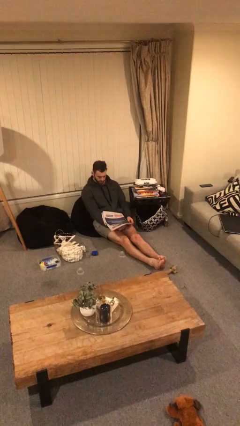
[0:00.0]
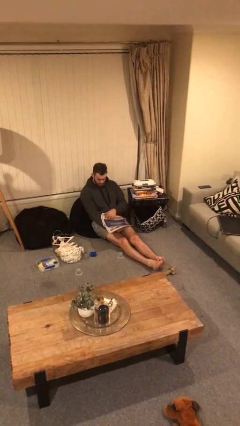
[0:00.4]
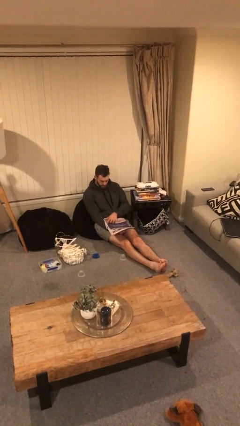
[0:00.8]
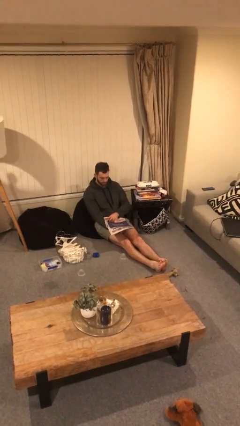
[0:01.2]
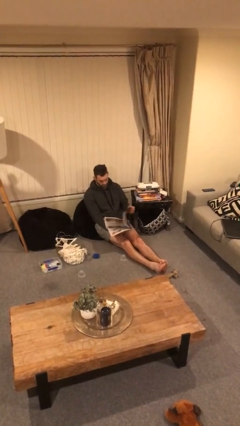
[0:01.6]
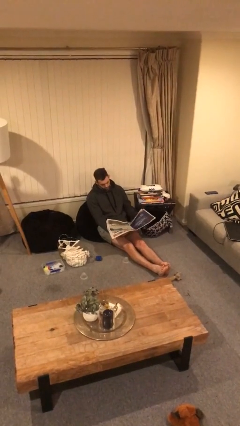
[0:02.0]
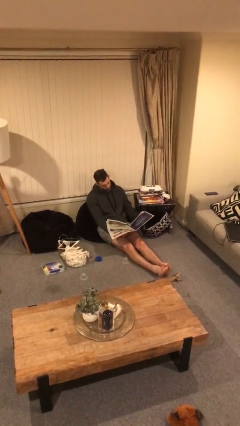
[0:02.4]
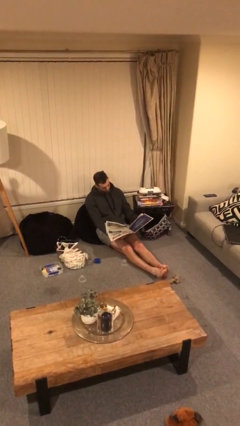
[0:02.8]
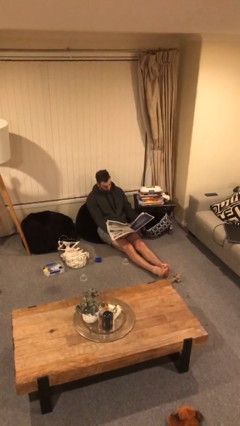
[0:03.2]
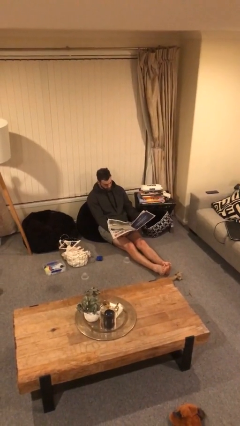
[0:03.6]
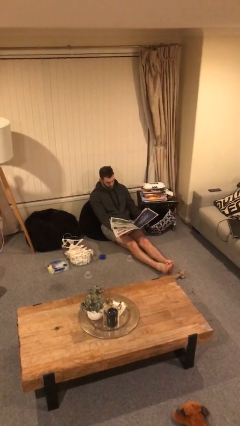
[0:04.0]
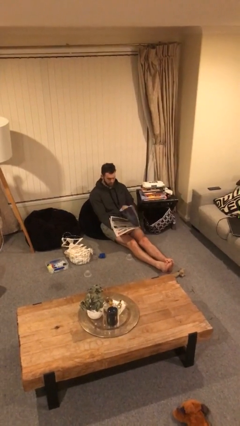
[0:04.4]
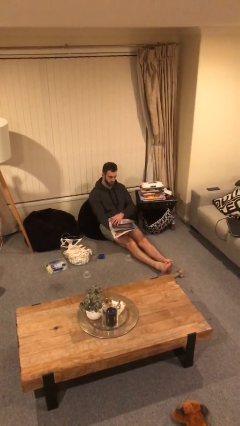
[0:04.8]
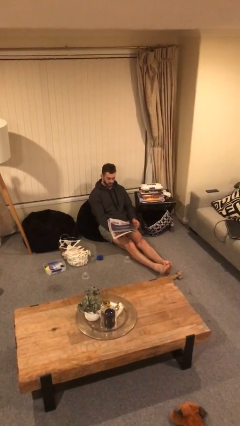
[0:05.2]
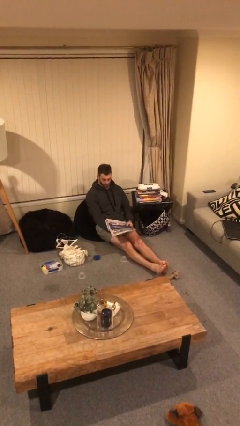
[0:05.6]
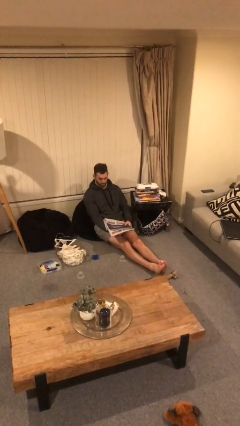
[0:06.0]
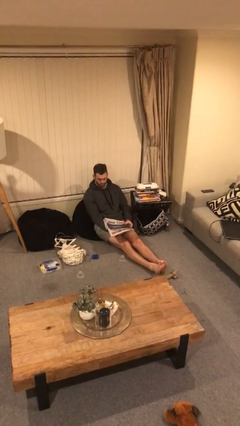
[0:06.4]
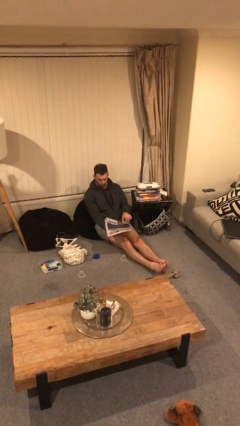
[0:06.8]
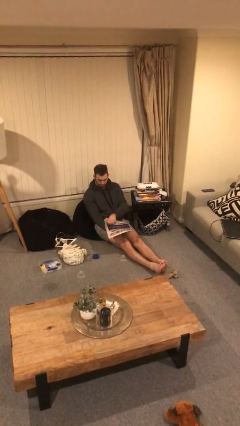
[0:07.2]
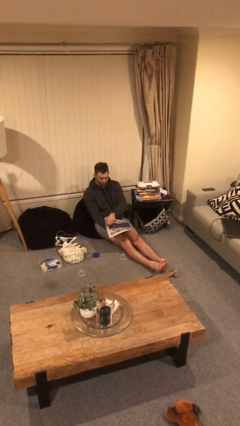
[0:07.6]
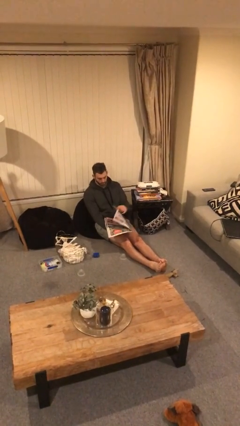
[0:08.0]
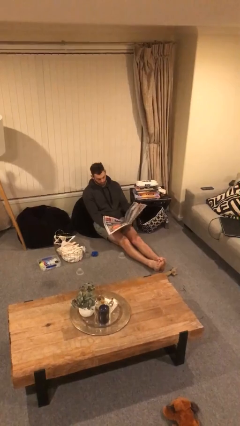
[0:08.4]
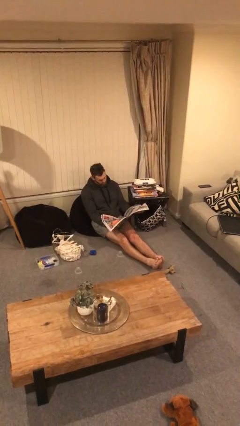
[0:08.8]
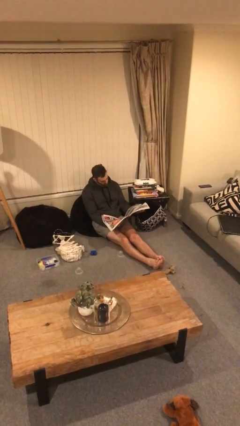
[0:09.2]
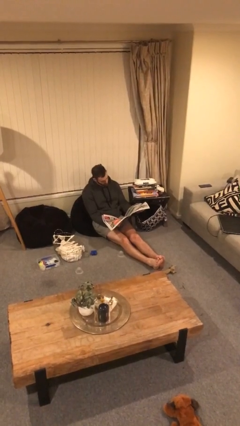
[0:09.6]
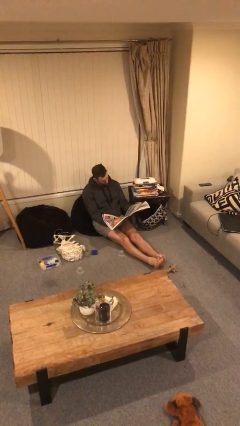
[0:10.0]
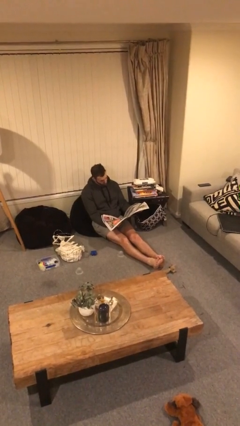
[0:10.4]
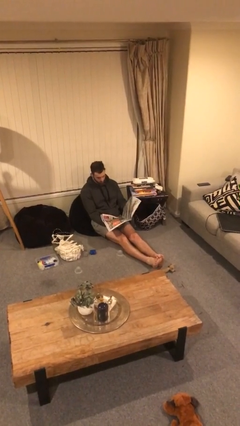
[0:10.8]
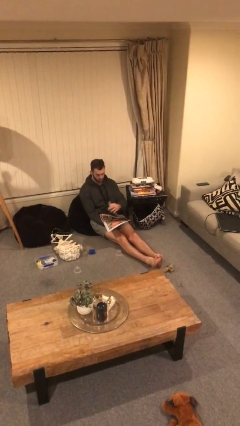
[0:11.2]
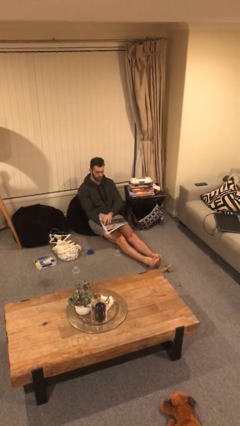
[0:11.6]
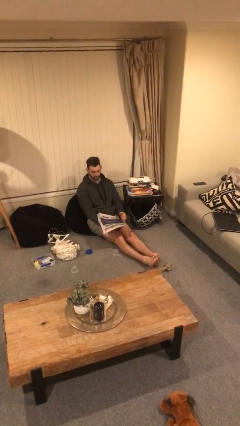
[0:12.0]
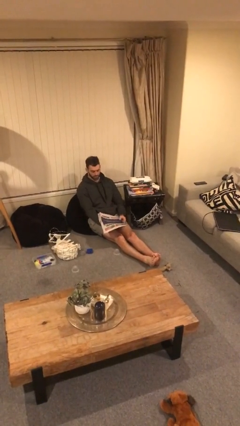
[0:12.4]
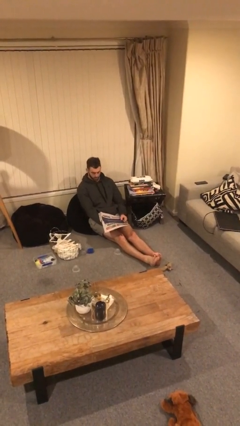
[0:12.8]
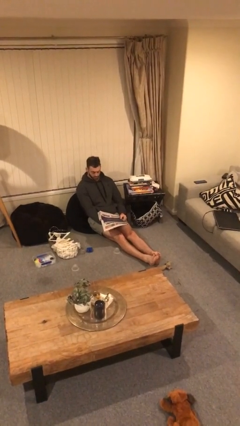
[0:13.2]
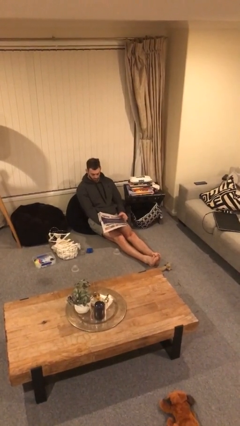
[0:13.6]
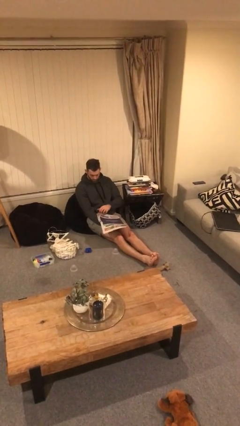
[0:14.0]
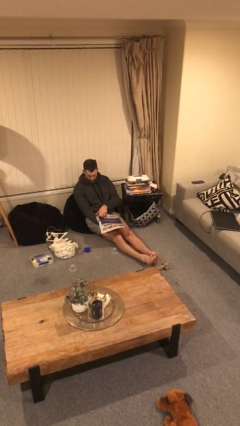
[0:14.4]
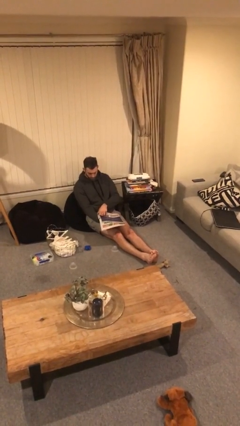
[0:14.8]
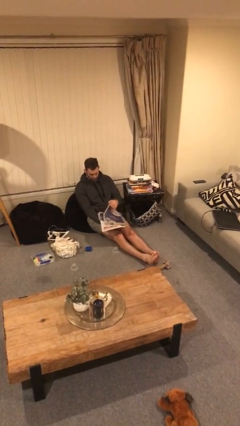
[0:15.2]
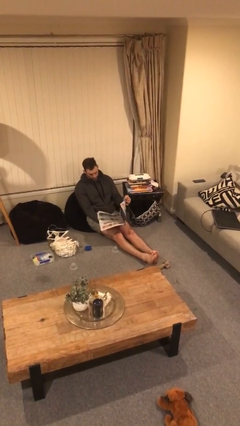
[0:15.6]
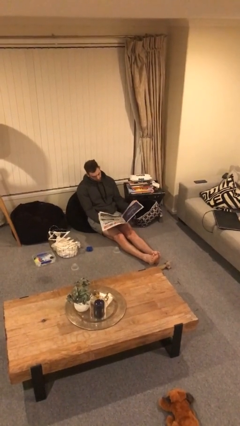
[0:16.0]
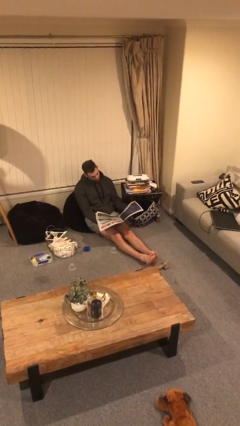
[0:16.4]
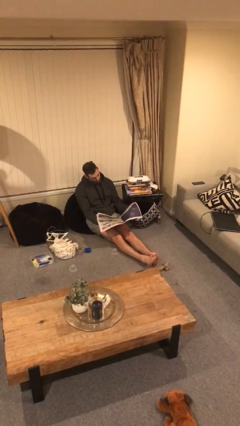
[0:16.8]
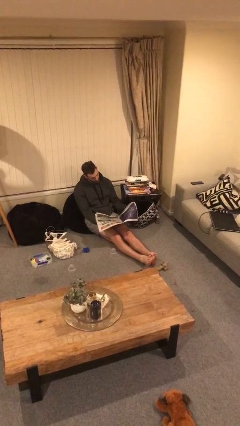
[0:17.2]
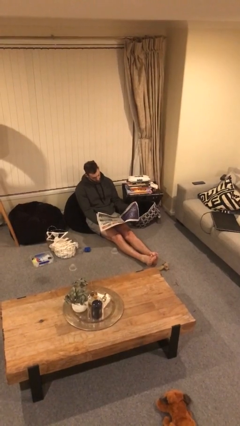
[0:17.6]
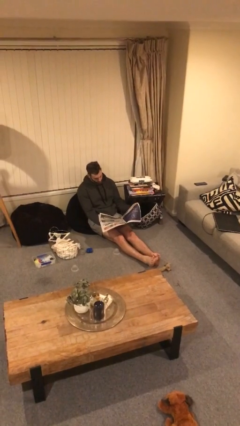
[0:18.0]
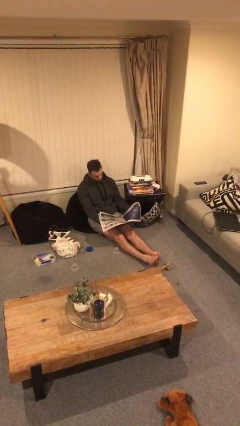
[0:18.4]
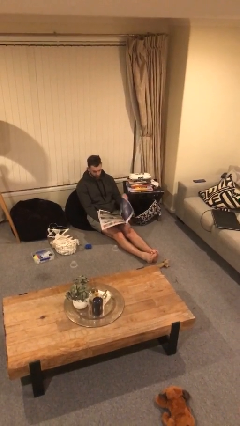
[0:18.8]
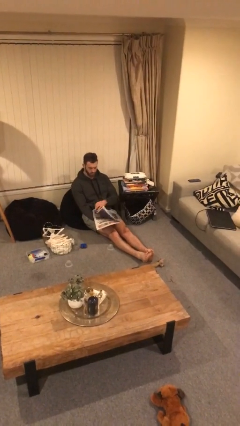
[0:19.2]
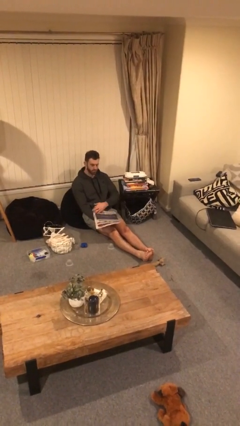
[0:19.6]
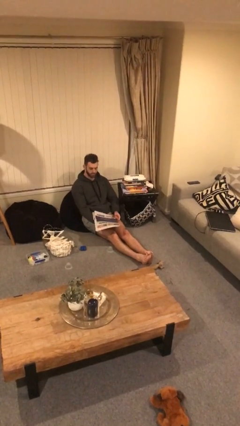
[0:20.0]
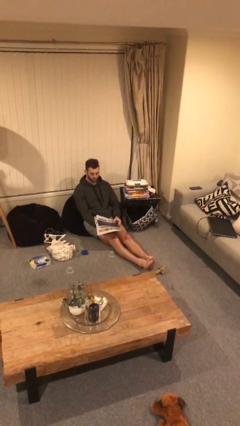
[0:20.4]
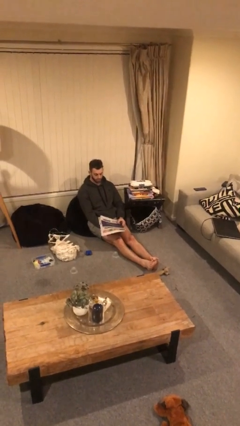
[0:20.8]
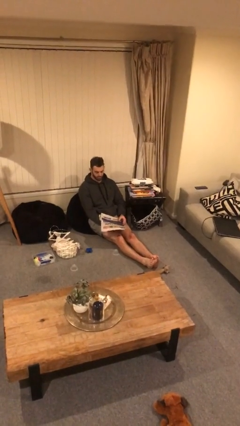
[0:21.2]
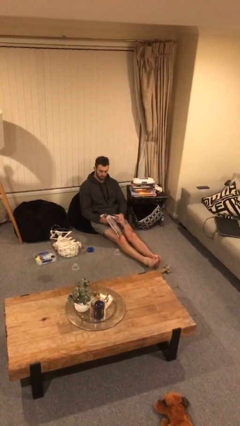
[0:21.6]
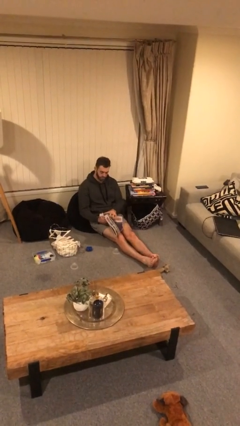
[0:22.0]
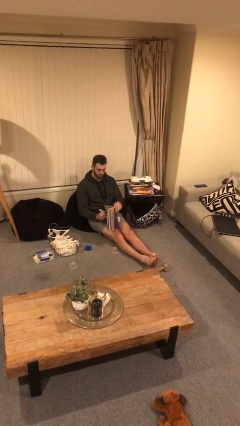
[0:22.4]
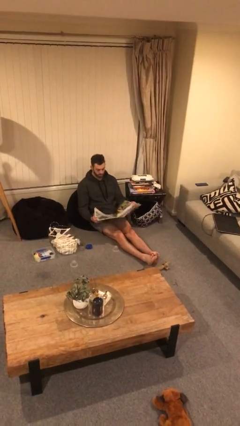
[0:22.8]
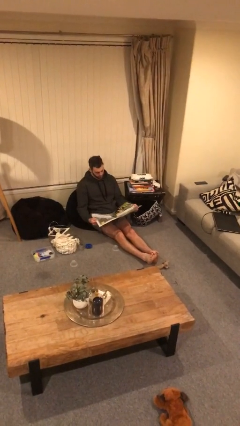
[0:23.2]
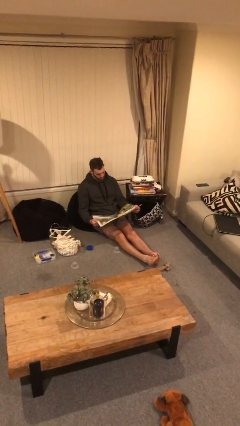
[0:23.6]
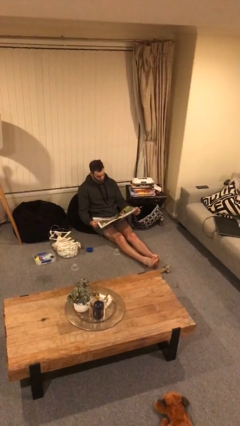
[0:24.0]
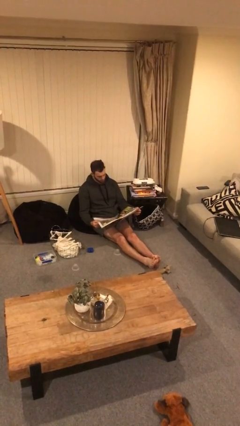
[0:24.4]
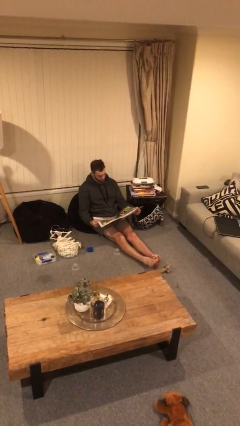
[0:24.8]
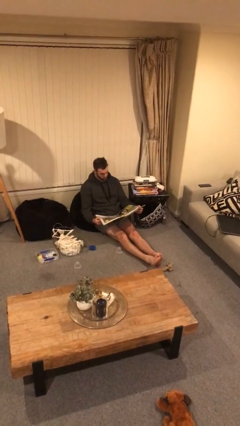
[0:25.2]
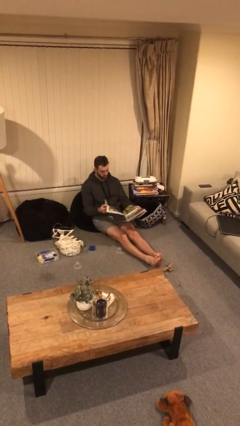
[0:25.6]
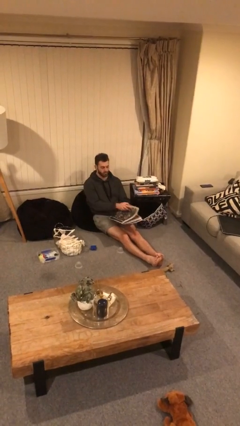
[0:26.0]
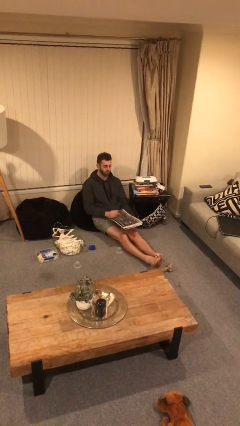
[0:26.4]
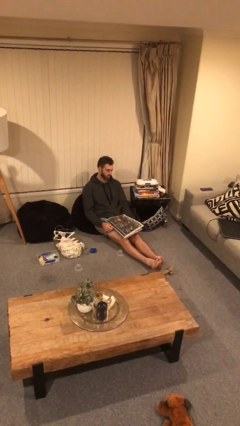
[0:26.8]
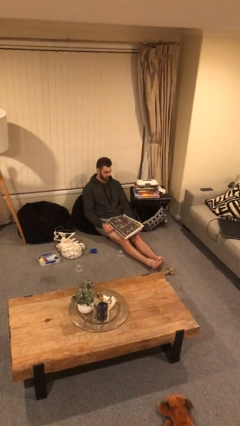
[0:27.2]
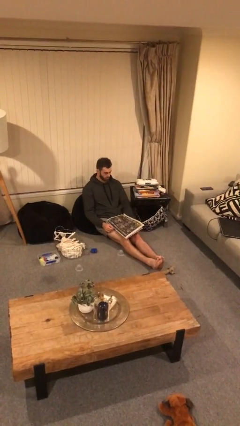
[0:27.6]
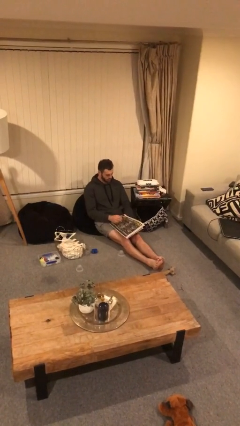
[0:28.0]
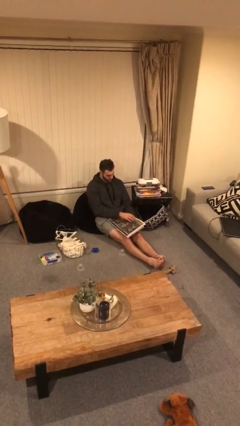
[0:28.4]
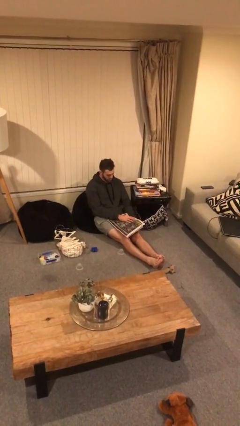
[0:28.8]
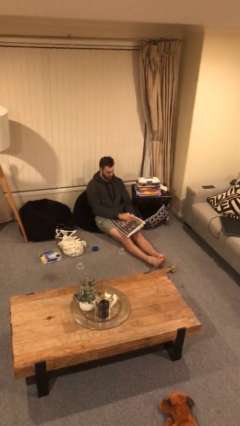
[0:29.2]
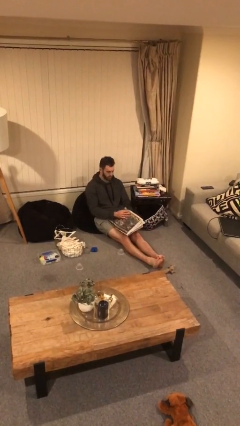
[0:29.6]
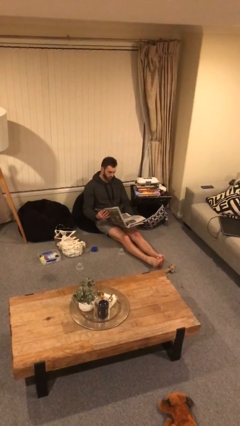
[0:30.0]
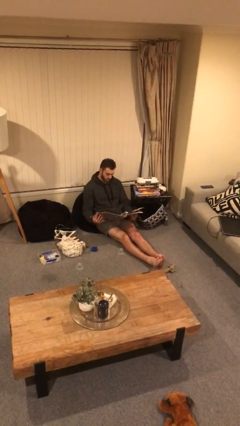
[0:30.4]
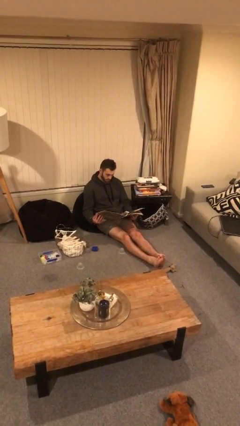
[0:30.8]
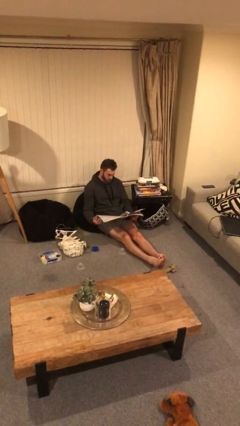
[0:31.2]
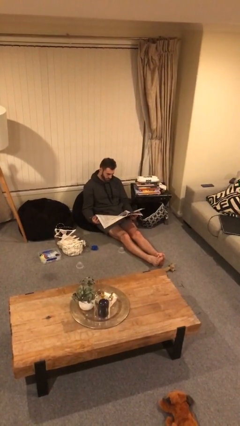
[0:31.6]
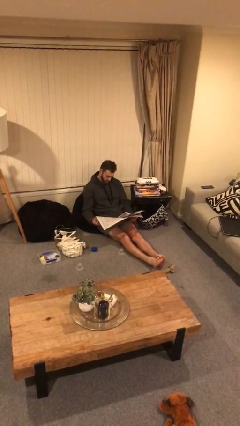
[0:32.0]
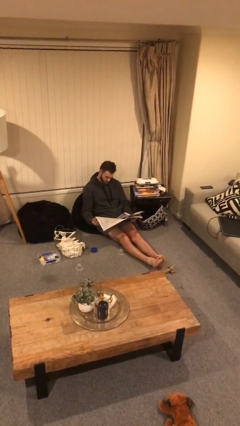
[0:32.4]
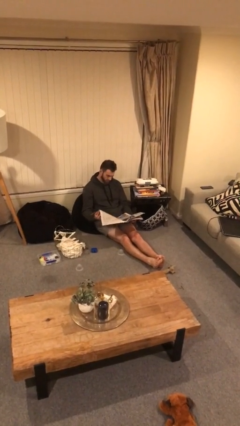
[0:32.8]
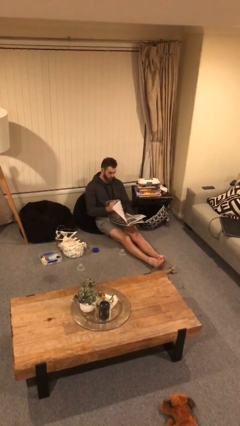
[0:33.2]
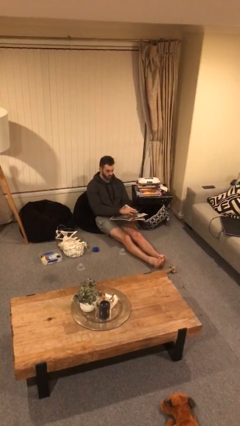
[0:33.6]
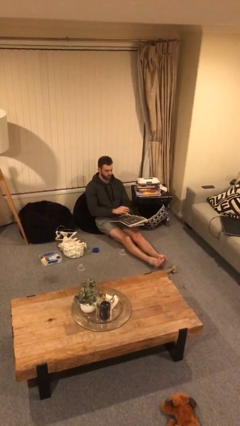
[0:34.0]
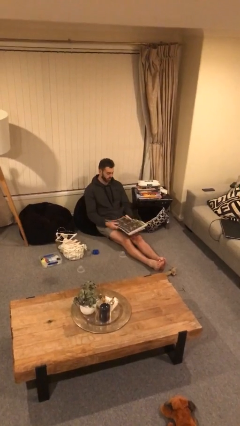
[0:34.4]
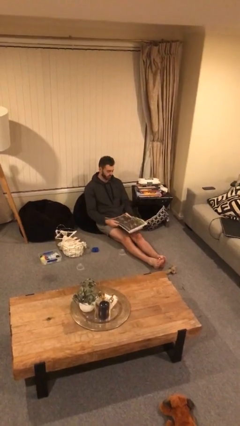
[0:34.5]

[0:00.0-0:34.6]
person reads newspaper

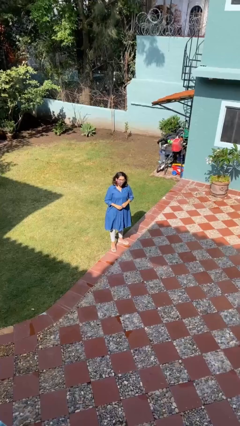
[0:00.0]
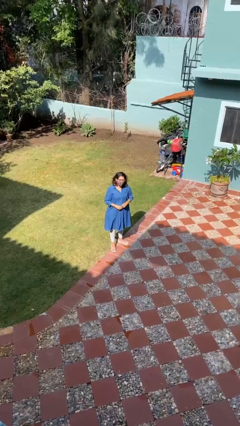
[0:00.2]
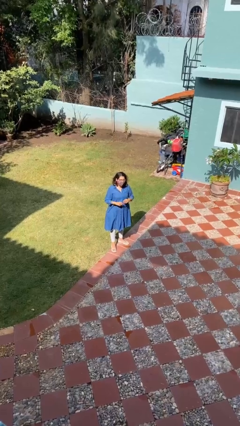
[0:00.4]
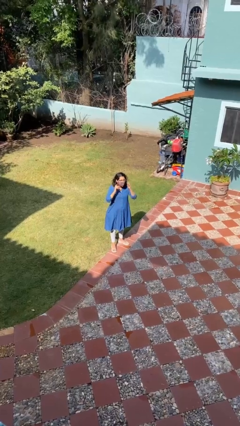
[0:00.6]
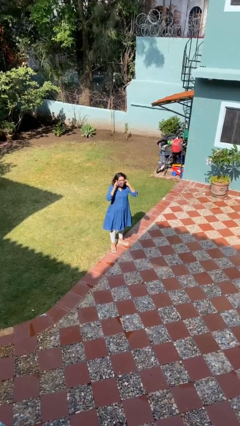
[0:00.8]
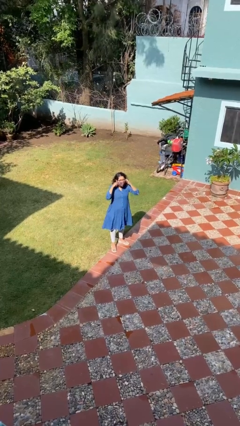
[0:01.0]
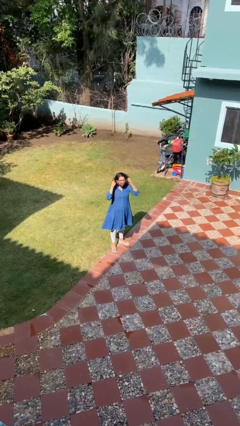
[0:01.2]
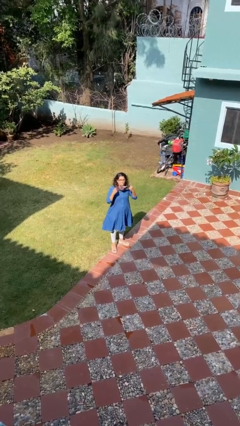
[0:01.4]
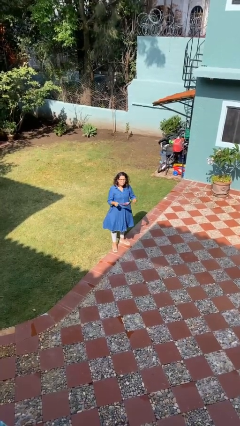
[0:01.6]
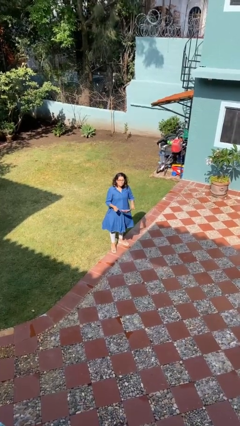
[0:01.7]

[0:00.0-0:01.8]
person takes off facemask
